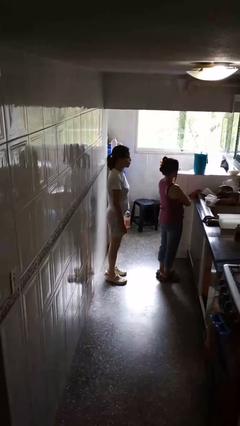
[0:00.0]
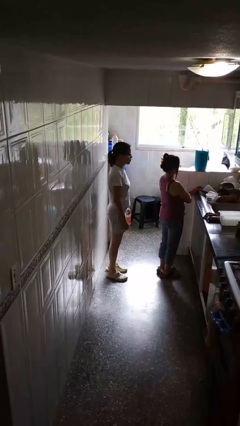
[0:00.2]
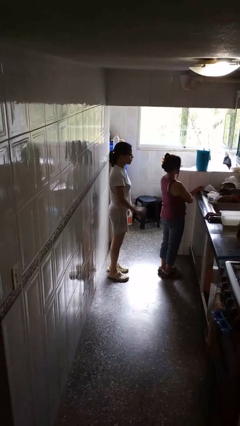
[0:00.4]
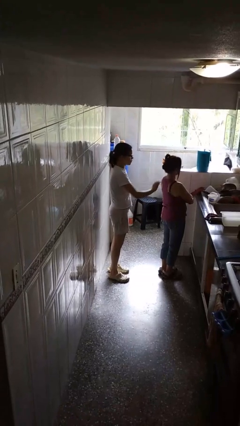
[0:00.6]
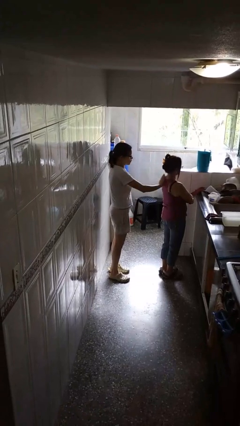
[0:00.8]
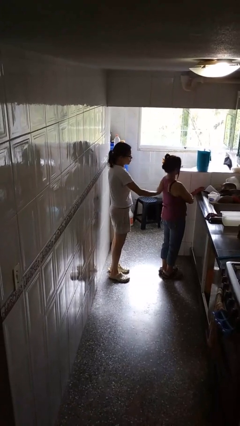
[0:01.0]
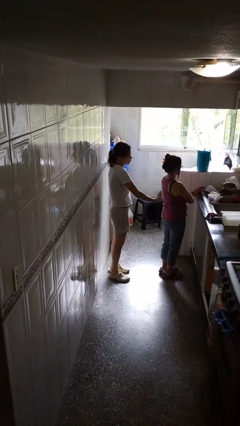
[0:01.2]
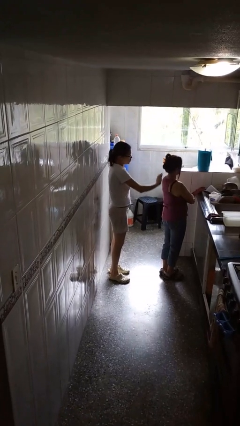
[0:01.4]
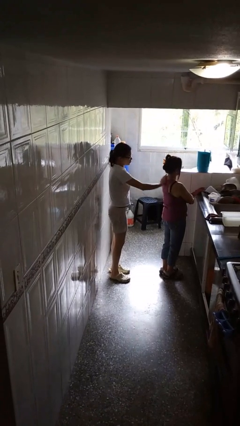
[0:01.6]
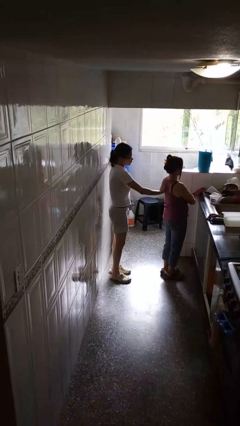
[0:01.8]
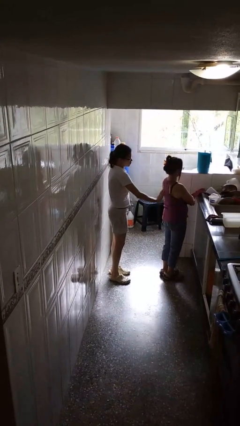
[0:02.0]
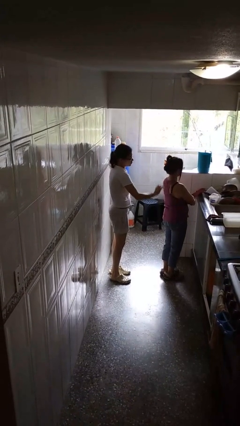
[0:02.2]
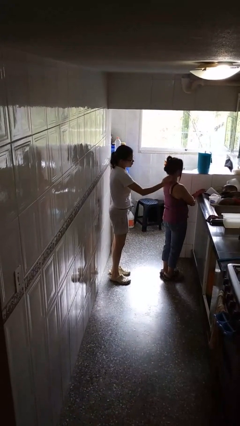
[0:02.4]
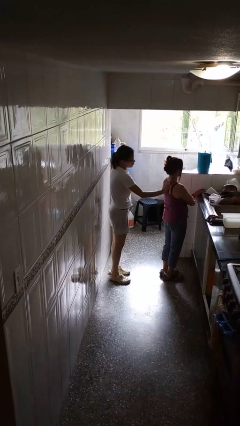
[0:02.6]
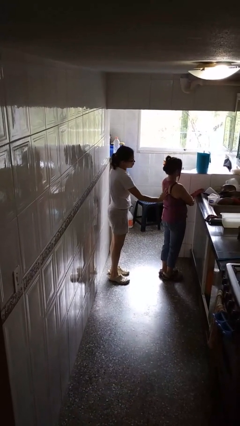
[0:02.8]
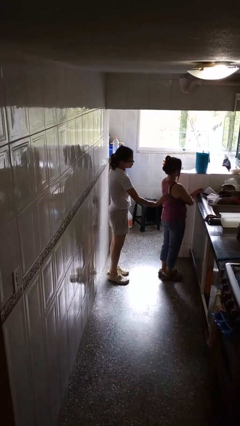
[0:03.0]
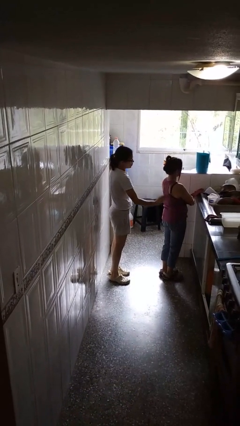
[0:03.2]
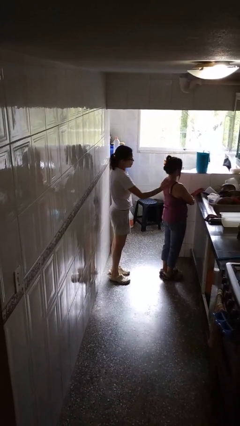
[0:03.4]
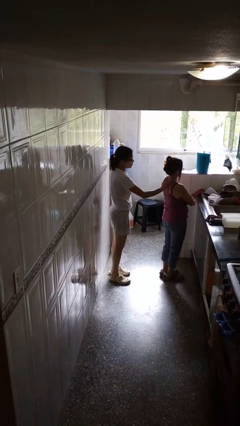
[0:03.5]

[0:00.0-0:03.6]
person touches back of person

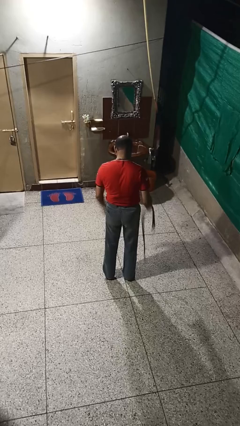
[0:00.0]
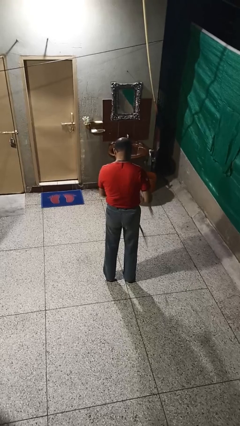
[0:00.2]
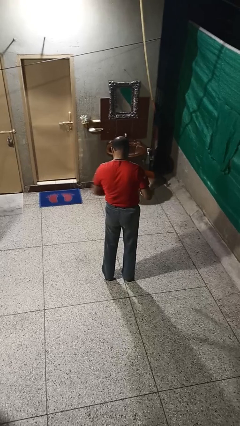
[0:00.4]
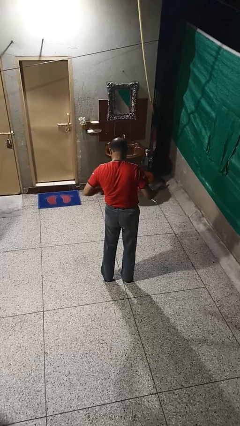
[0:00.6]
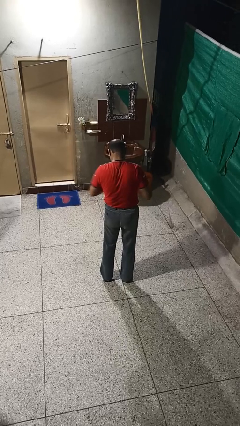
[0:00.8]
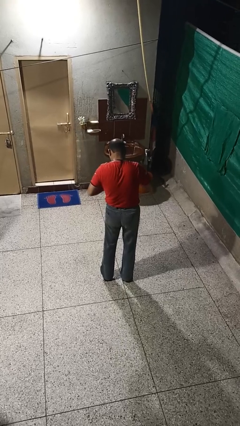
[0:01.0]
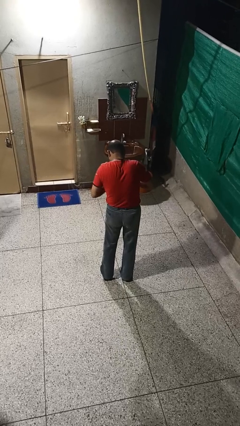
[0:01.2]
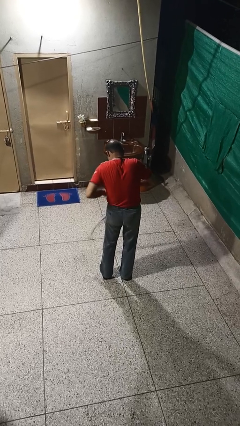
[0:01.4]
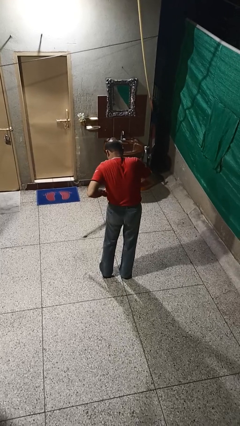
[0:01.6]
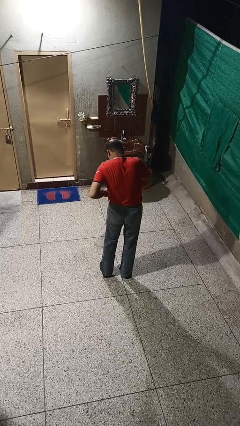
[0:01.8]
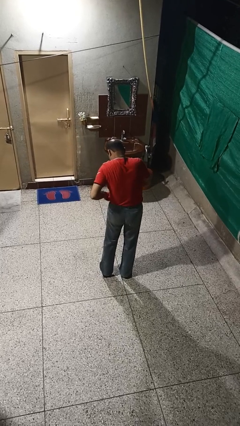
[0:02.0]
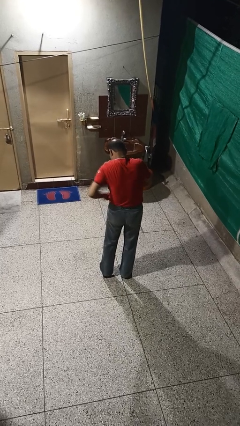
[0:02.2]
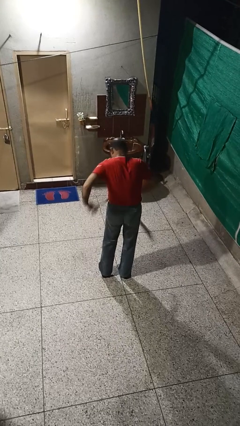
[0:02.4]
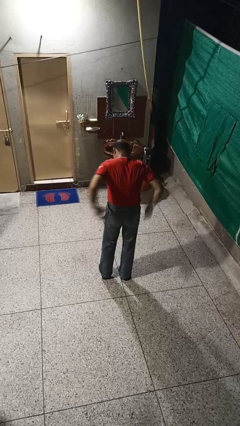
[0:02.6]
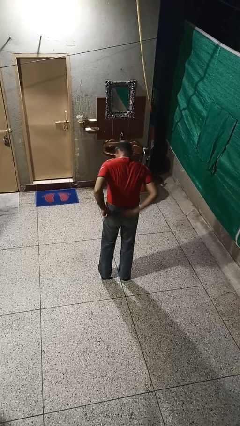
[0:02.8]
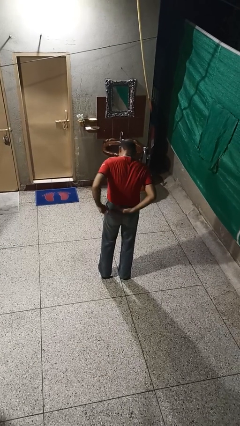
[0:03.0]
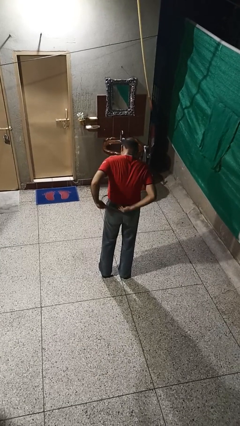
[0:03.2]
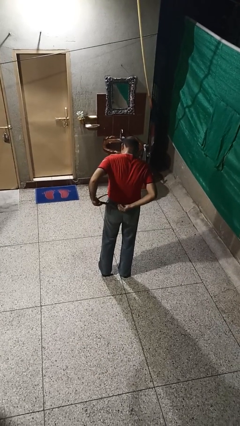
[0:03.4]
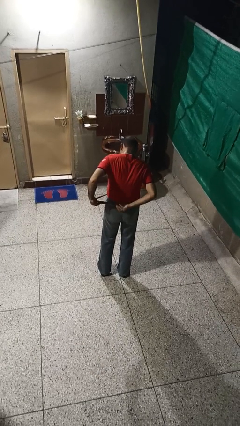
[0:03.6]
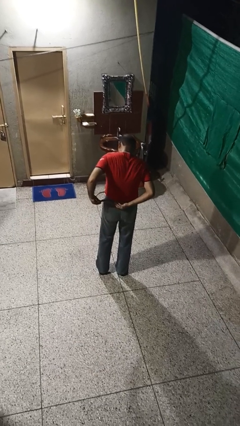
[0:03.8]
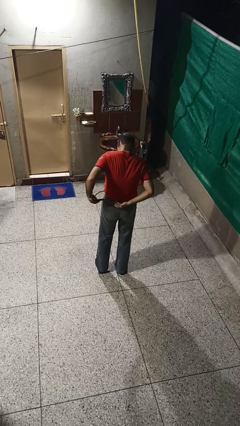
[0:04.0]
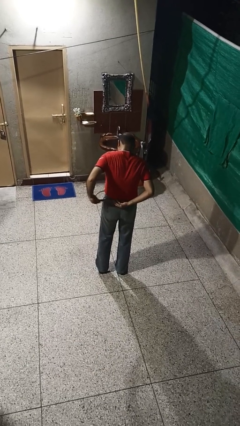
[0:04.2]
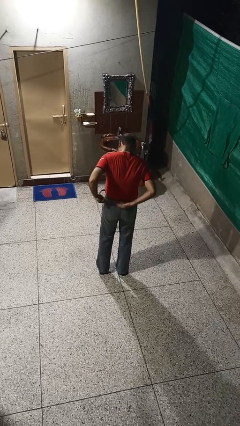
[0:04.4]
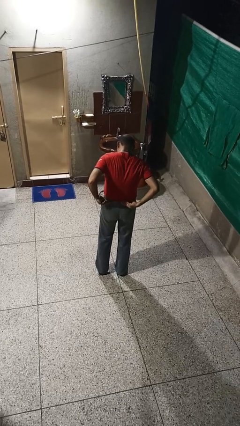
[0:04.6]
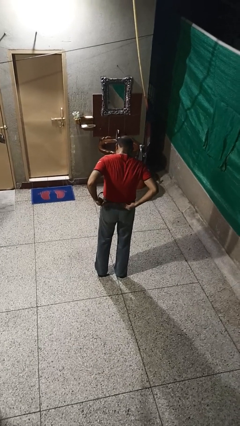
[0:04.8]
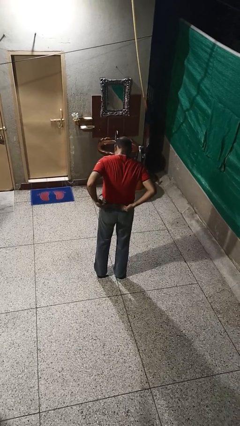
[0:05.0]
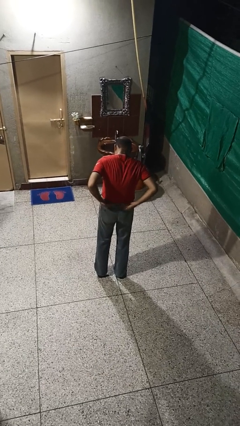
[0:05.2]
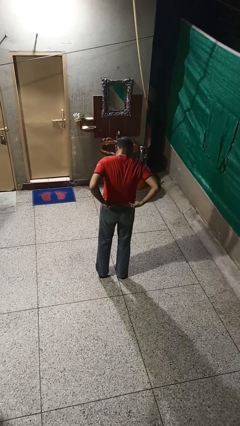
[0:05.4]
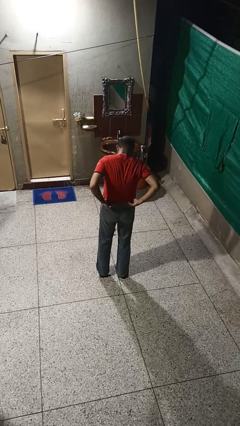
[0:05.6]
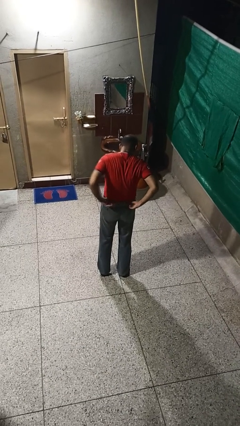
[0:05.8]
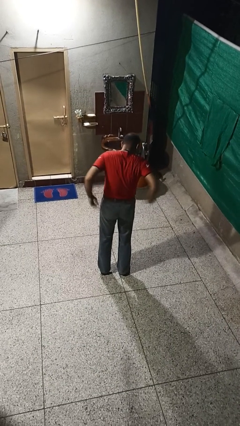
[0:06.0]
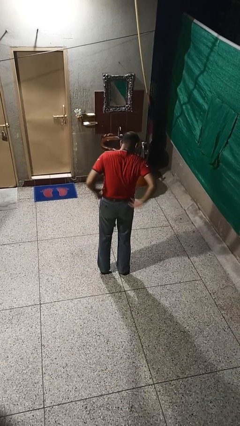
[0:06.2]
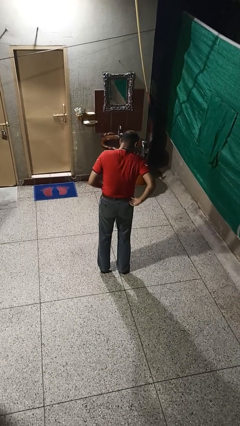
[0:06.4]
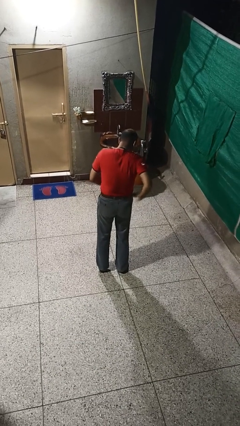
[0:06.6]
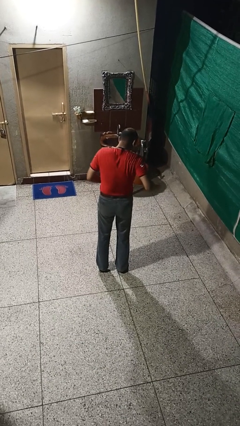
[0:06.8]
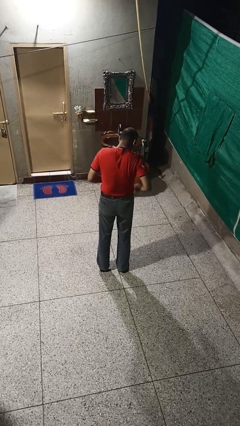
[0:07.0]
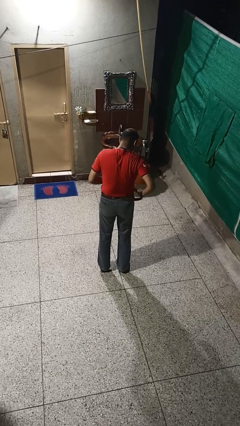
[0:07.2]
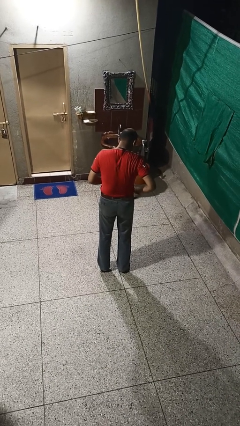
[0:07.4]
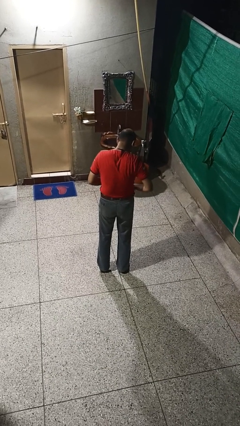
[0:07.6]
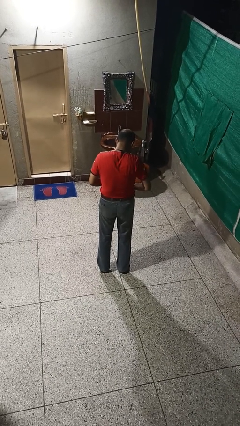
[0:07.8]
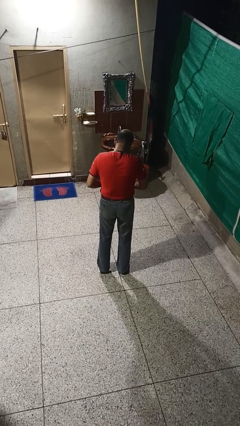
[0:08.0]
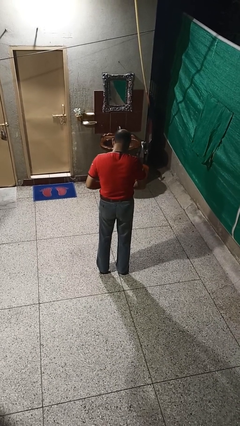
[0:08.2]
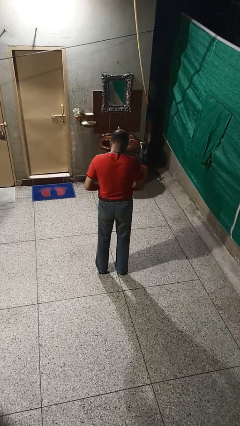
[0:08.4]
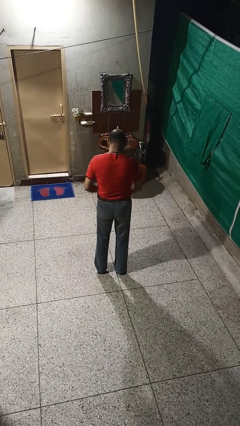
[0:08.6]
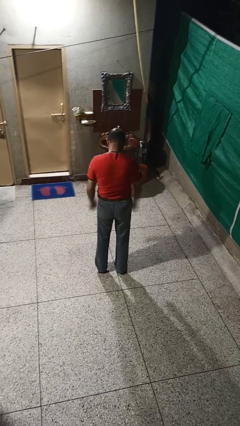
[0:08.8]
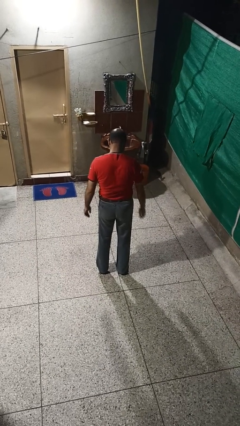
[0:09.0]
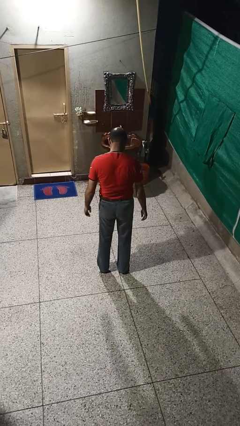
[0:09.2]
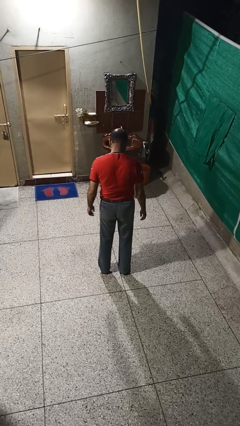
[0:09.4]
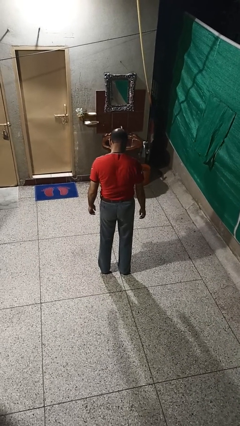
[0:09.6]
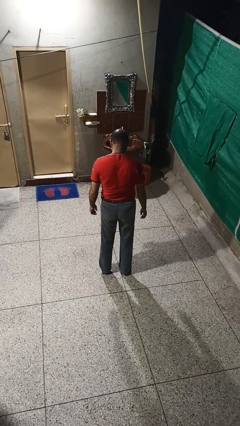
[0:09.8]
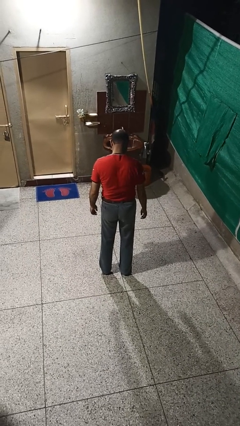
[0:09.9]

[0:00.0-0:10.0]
person puts on belt

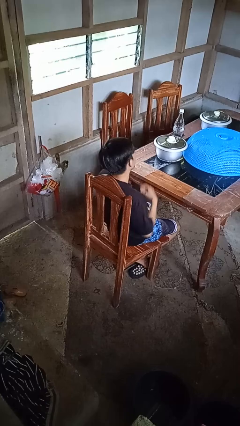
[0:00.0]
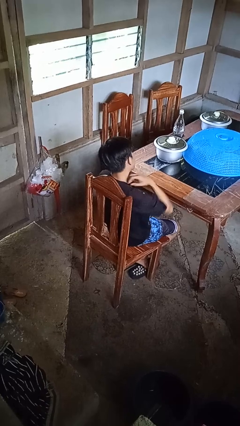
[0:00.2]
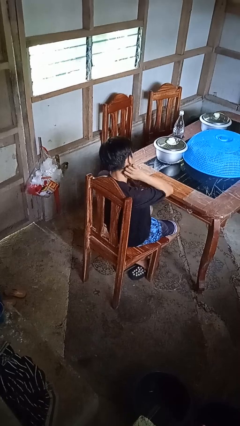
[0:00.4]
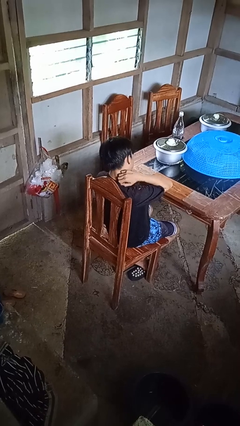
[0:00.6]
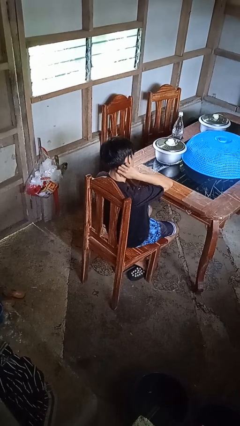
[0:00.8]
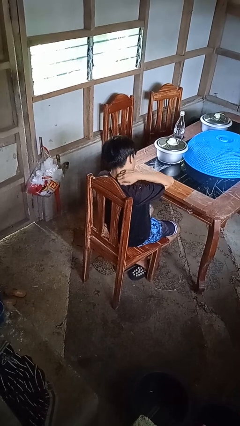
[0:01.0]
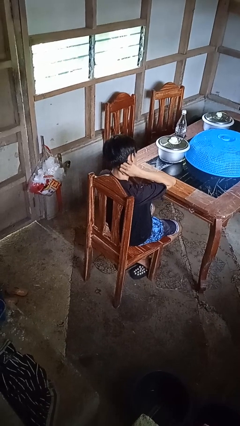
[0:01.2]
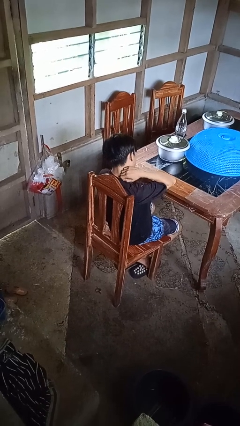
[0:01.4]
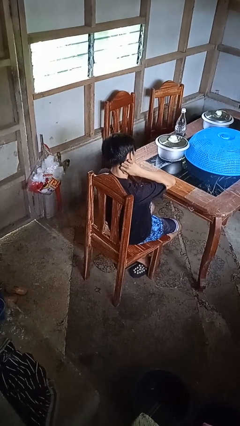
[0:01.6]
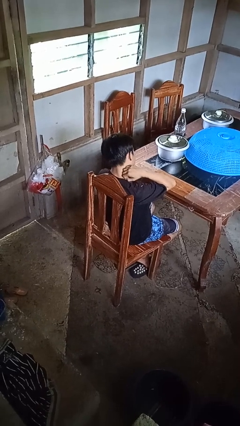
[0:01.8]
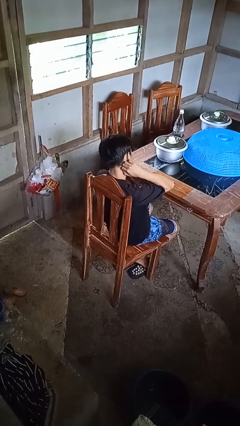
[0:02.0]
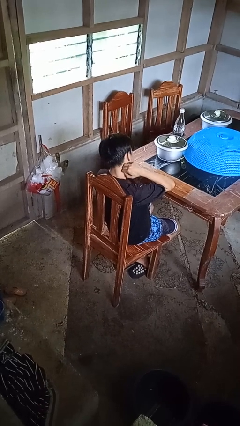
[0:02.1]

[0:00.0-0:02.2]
person rubs neck

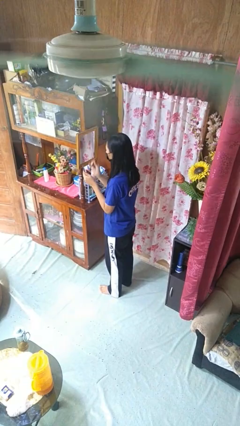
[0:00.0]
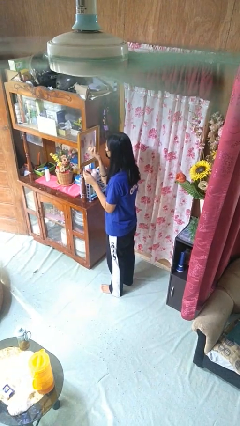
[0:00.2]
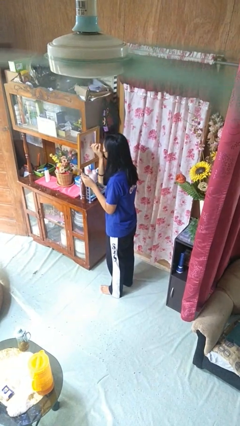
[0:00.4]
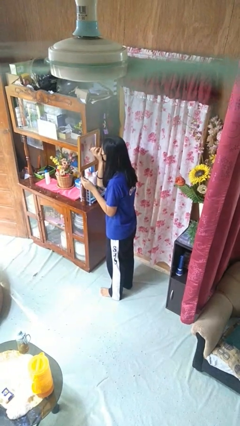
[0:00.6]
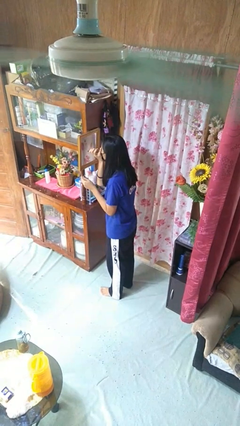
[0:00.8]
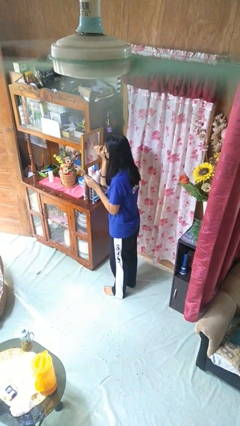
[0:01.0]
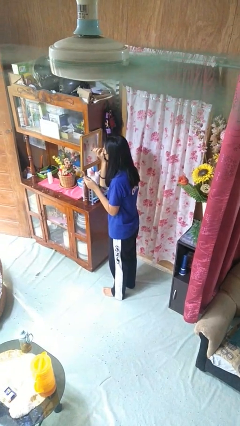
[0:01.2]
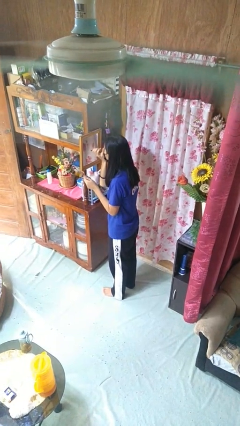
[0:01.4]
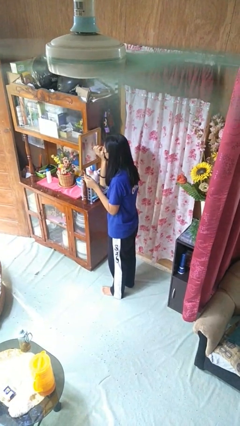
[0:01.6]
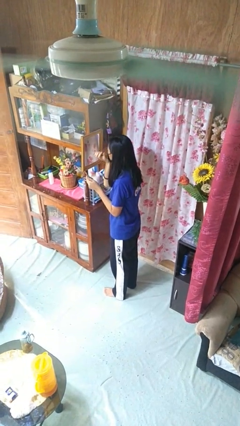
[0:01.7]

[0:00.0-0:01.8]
person applies eye makeup

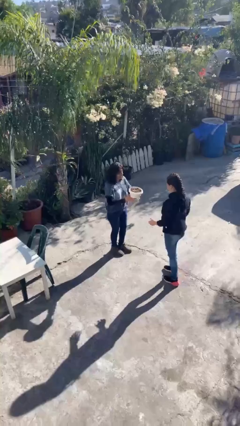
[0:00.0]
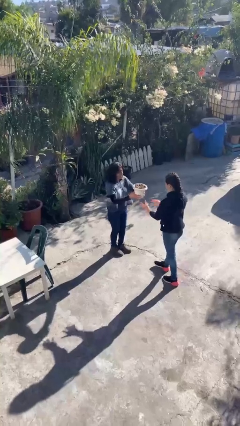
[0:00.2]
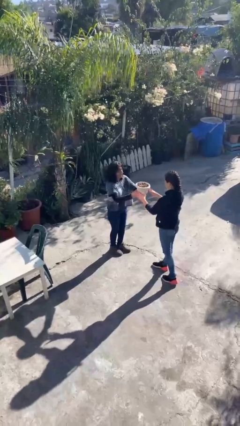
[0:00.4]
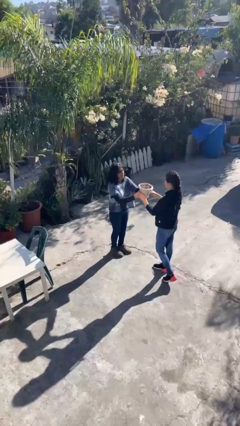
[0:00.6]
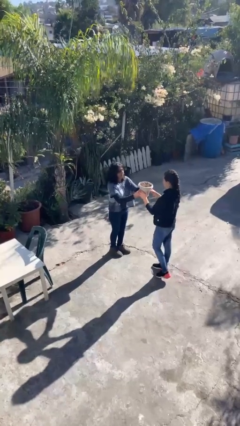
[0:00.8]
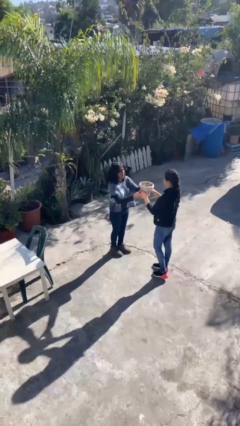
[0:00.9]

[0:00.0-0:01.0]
person transfers object to person
